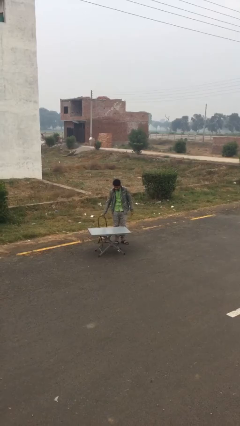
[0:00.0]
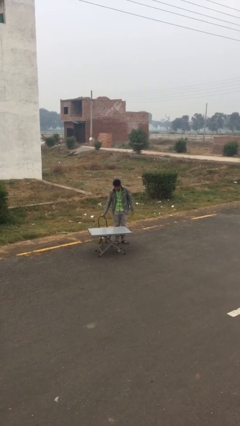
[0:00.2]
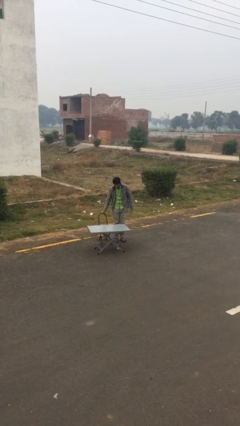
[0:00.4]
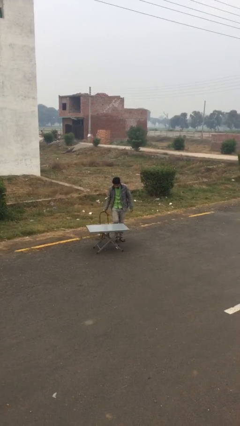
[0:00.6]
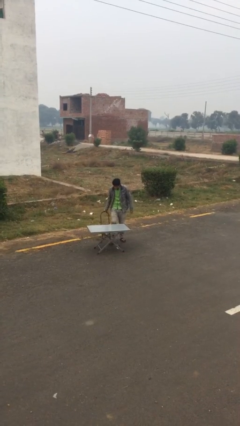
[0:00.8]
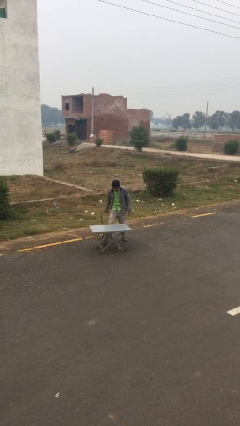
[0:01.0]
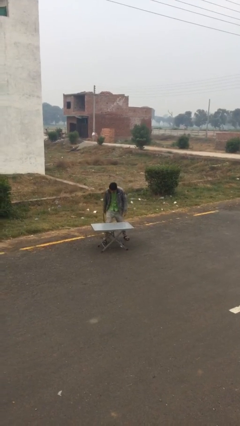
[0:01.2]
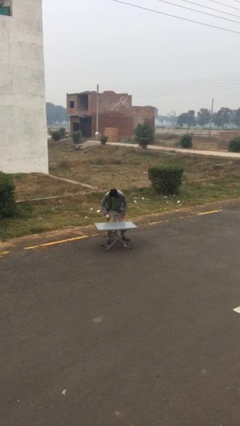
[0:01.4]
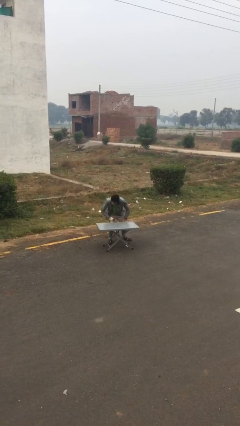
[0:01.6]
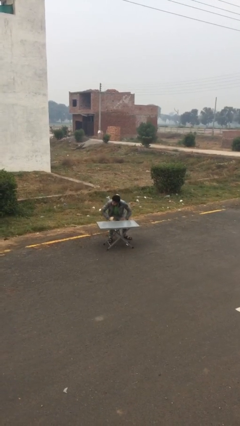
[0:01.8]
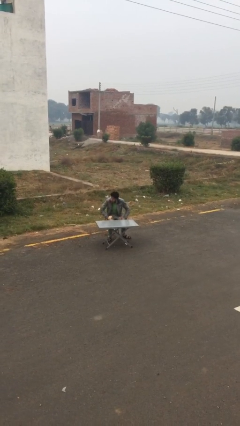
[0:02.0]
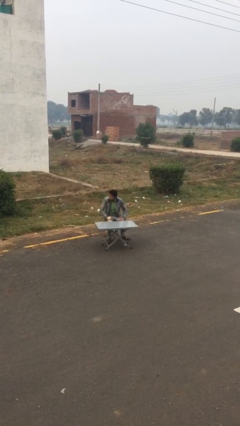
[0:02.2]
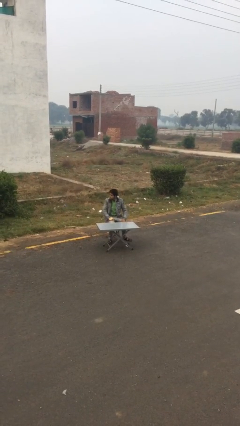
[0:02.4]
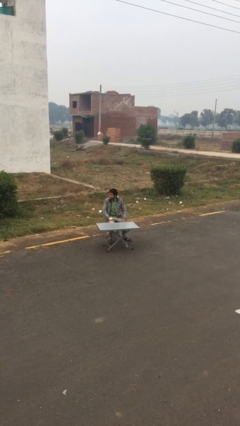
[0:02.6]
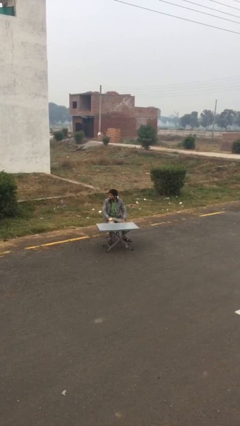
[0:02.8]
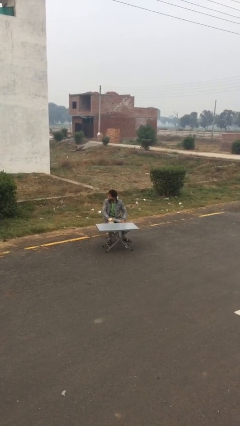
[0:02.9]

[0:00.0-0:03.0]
person sits down

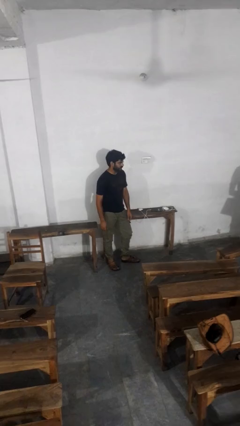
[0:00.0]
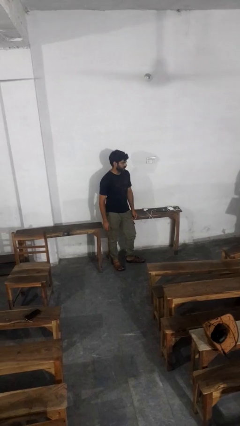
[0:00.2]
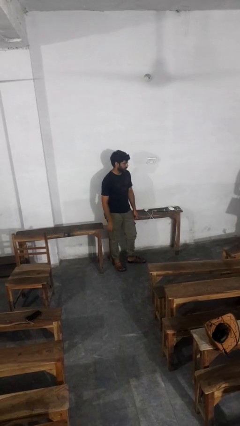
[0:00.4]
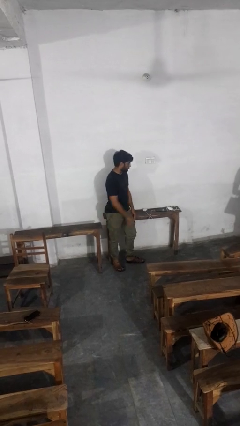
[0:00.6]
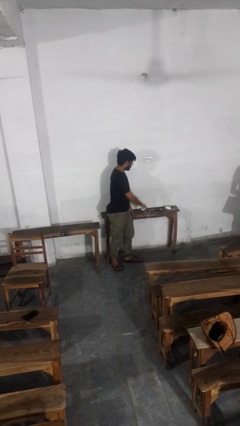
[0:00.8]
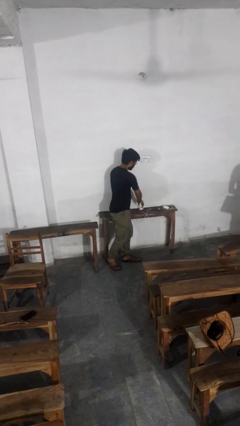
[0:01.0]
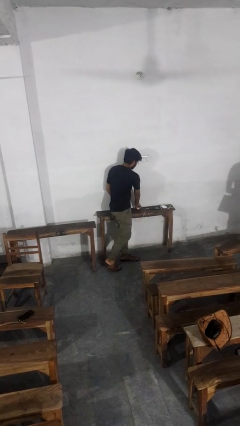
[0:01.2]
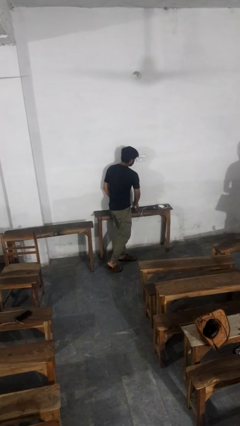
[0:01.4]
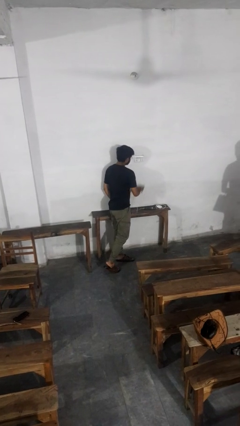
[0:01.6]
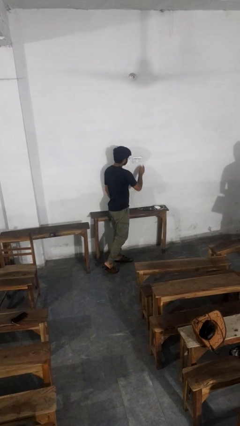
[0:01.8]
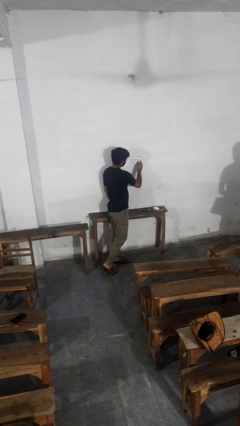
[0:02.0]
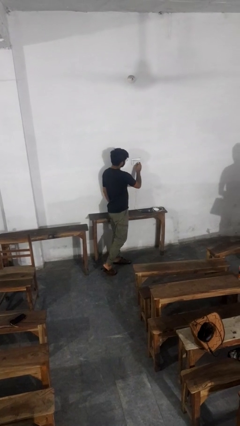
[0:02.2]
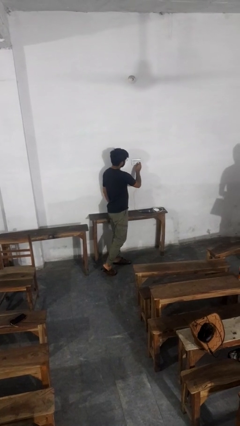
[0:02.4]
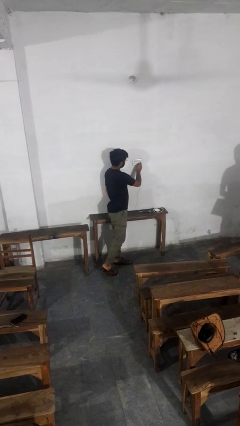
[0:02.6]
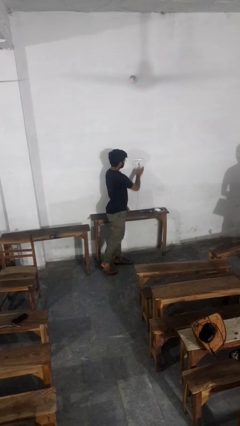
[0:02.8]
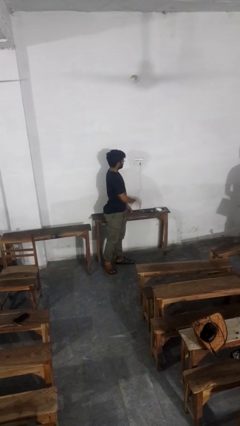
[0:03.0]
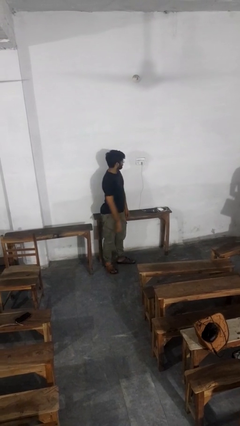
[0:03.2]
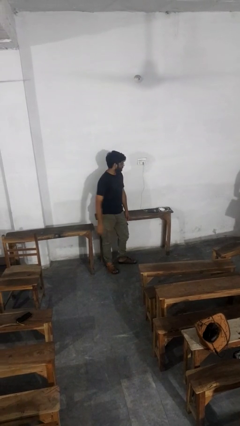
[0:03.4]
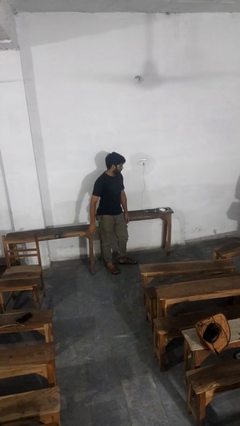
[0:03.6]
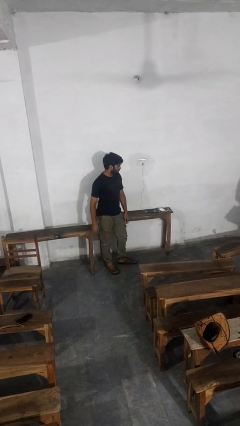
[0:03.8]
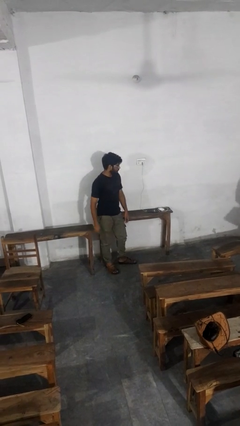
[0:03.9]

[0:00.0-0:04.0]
person plugs into electrical socket

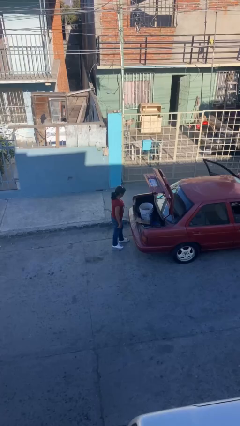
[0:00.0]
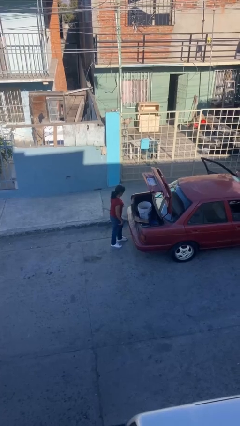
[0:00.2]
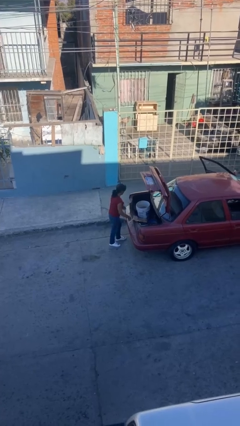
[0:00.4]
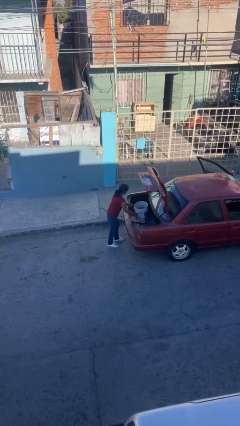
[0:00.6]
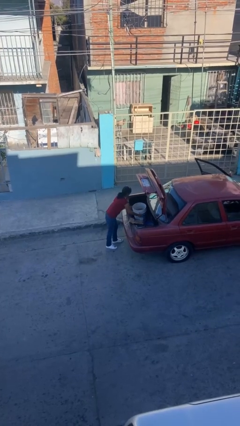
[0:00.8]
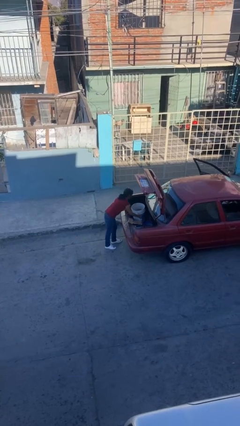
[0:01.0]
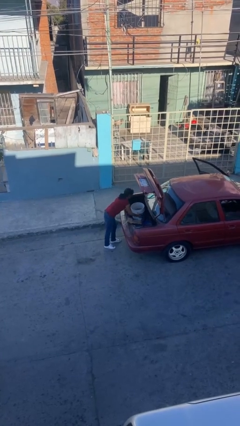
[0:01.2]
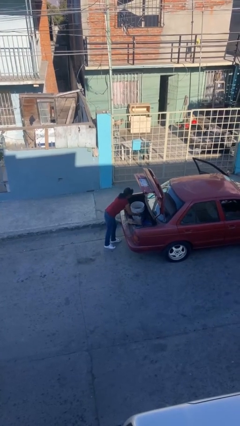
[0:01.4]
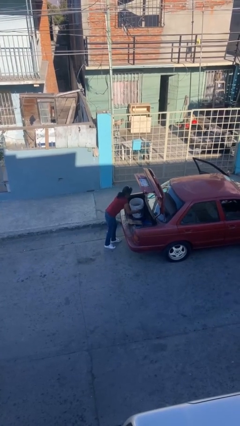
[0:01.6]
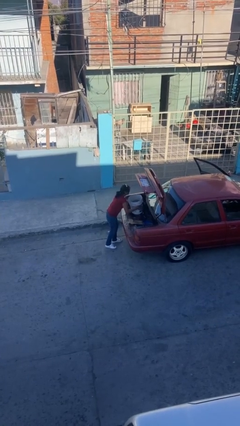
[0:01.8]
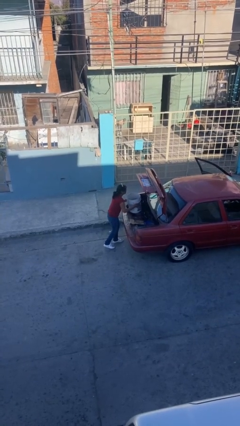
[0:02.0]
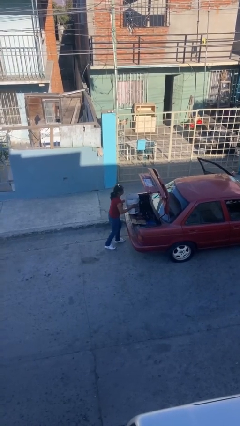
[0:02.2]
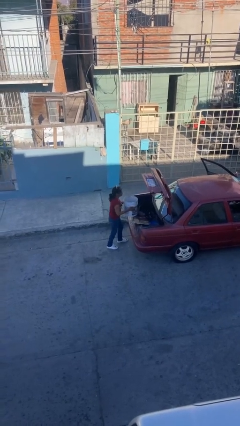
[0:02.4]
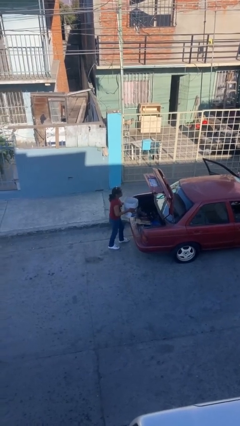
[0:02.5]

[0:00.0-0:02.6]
person unloads car

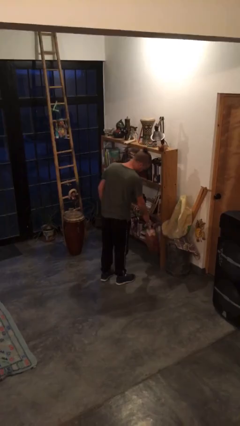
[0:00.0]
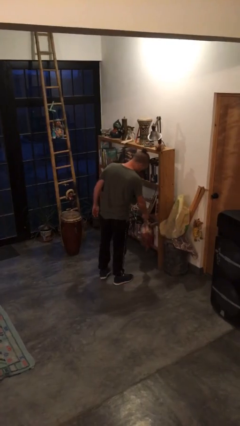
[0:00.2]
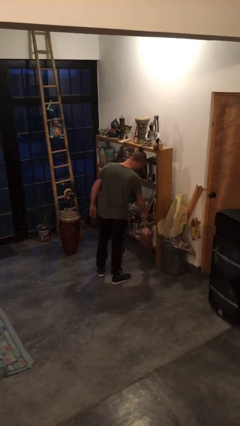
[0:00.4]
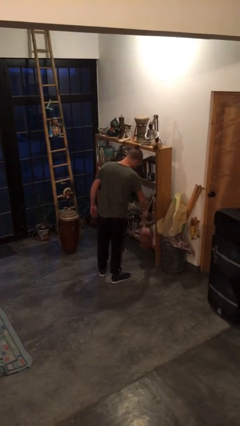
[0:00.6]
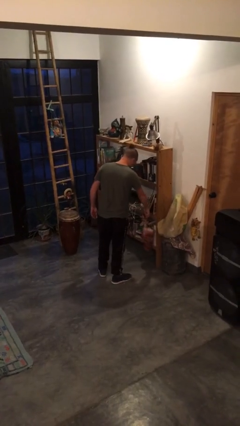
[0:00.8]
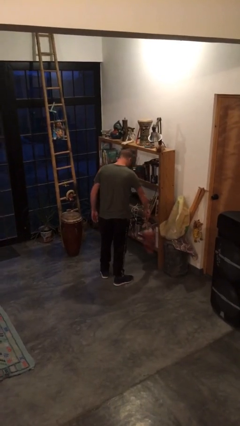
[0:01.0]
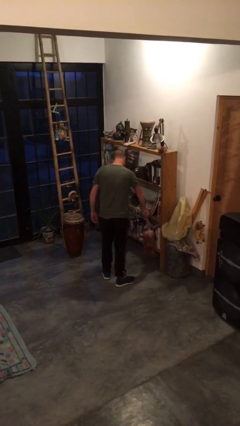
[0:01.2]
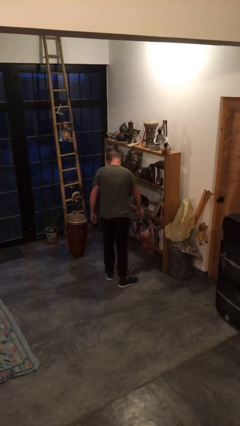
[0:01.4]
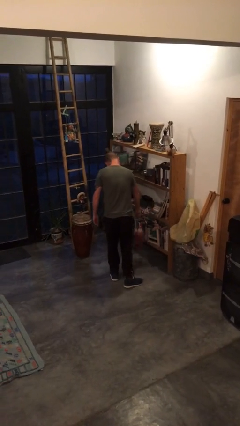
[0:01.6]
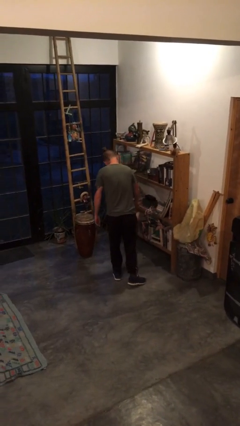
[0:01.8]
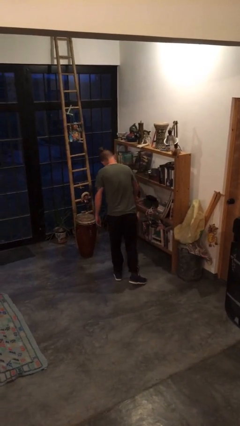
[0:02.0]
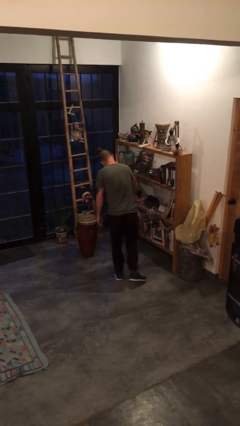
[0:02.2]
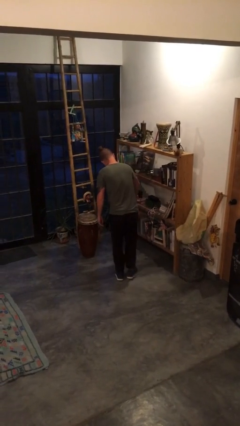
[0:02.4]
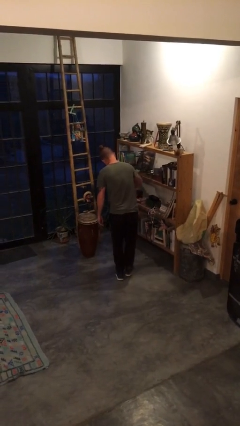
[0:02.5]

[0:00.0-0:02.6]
person dusts furniture

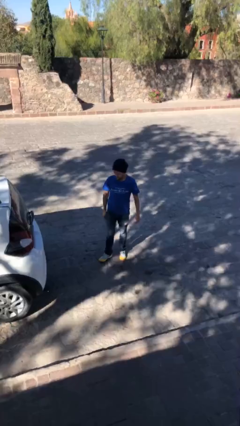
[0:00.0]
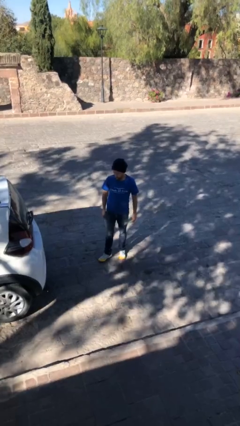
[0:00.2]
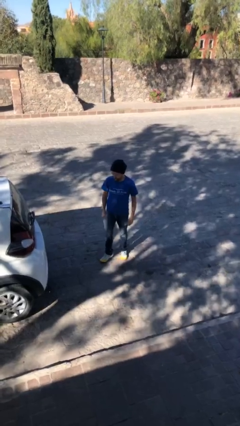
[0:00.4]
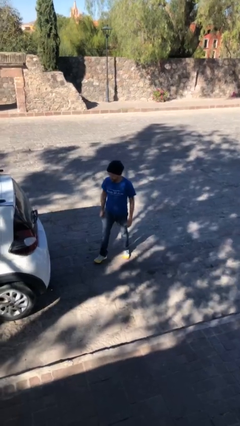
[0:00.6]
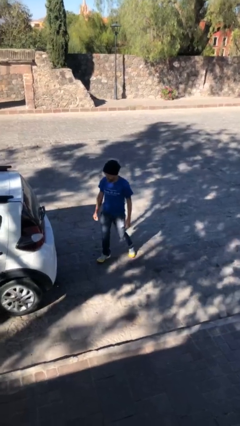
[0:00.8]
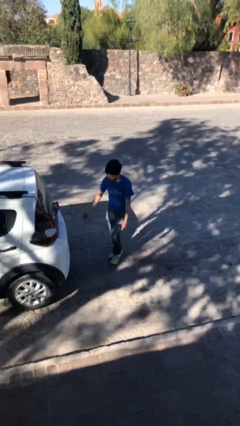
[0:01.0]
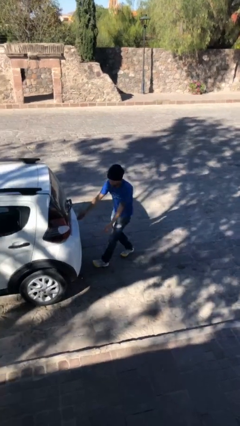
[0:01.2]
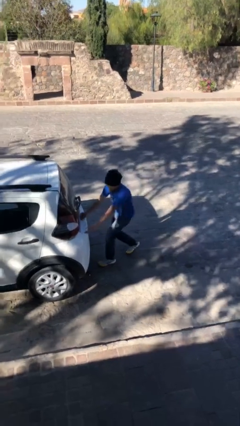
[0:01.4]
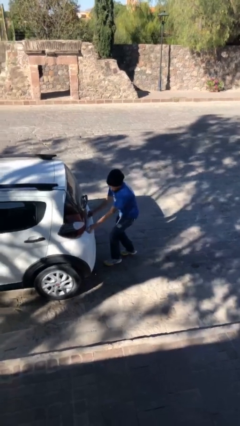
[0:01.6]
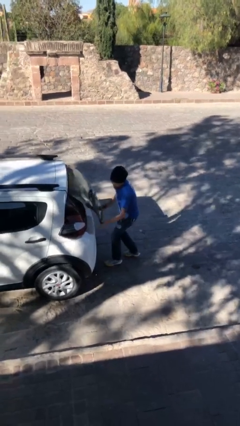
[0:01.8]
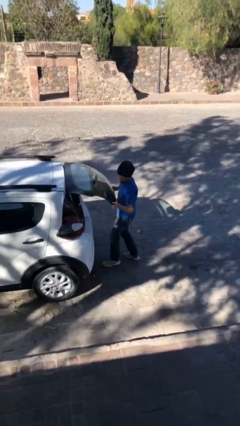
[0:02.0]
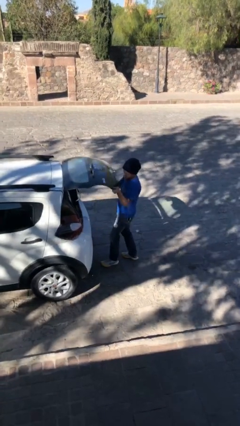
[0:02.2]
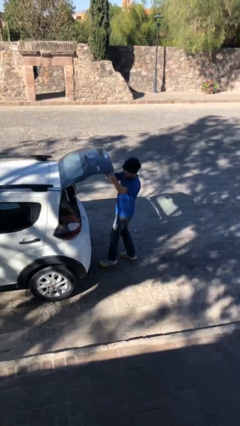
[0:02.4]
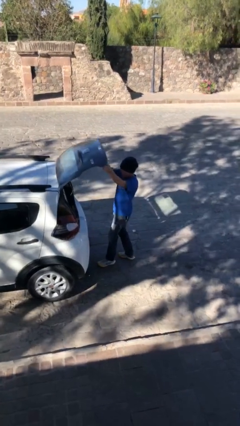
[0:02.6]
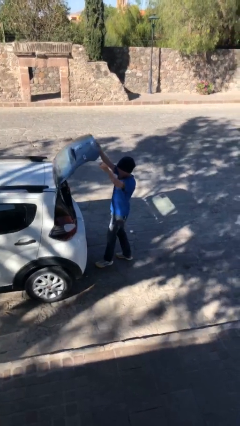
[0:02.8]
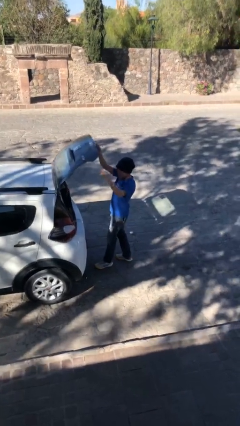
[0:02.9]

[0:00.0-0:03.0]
person opens car trunk

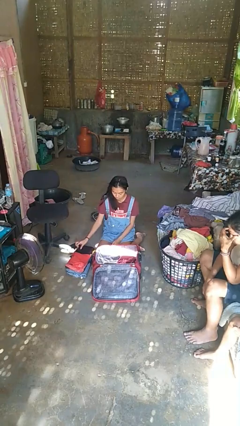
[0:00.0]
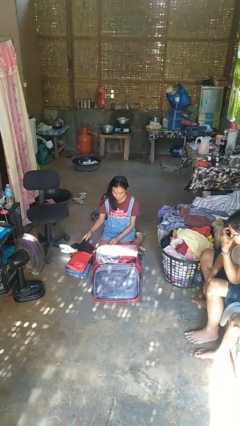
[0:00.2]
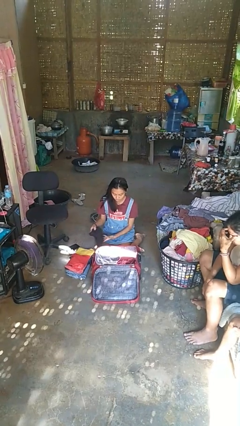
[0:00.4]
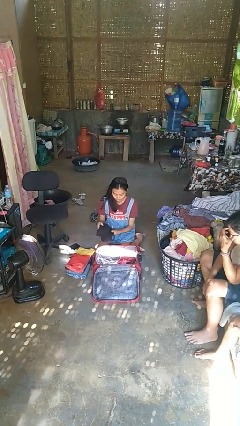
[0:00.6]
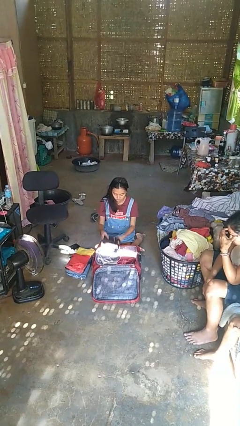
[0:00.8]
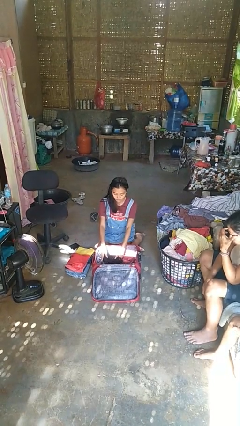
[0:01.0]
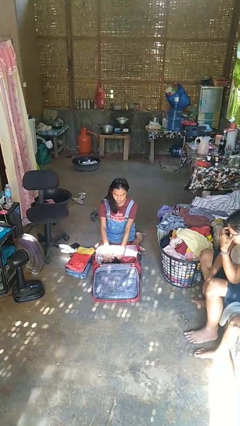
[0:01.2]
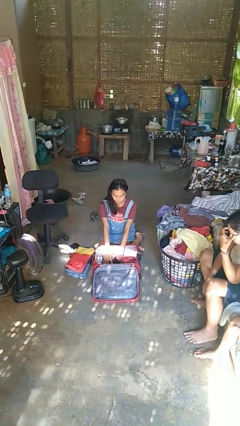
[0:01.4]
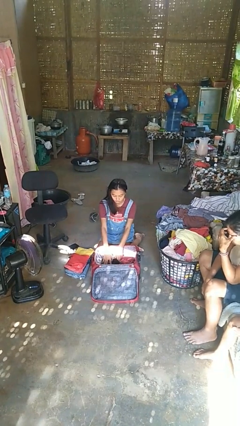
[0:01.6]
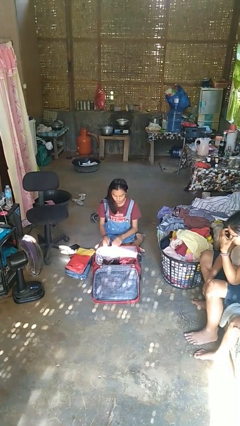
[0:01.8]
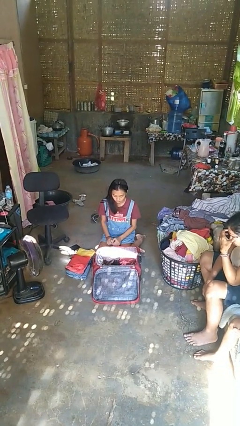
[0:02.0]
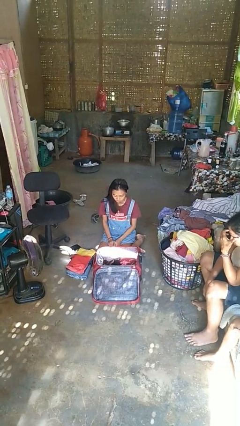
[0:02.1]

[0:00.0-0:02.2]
person loads clothes into suitcase
